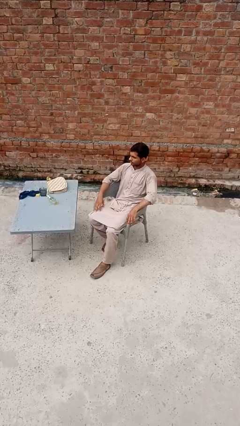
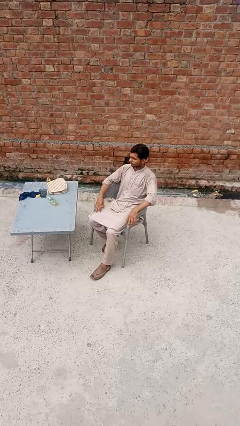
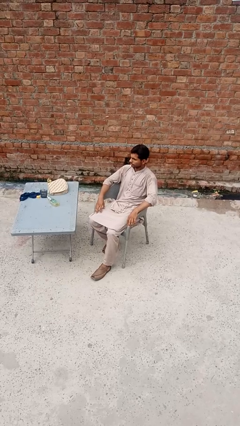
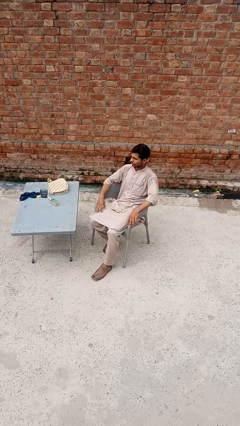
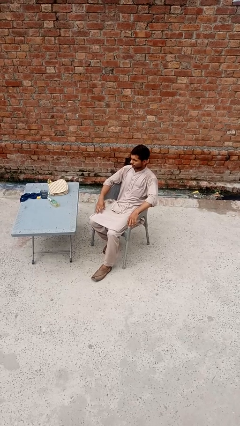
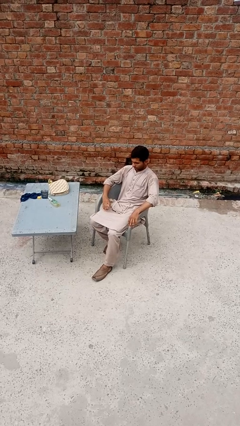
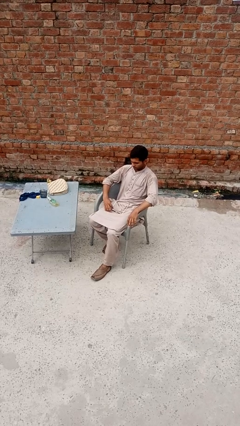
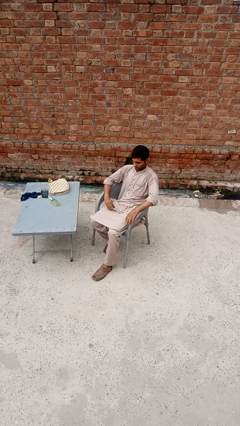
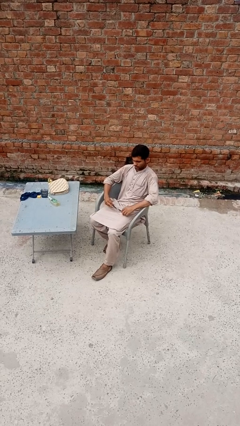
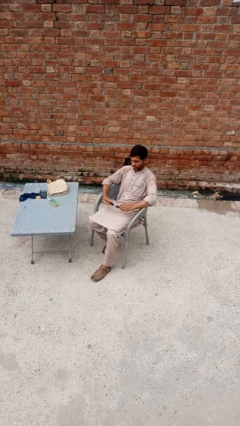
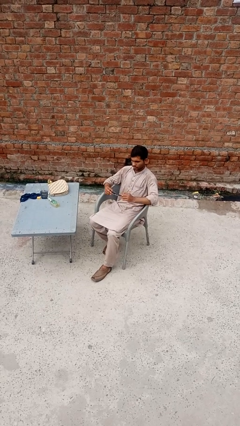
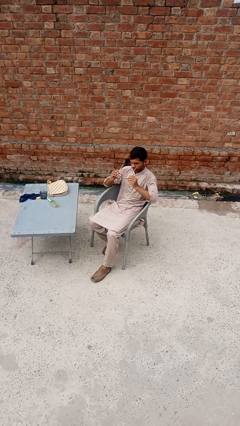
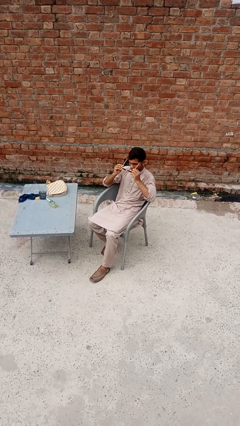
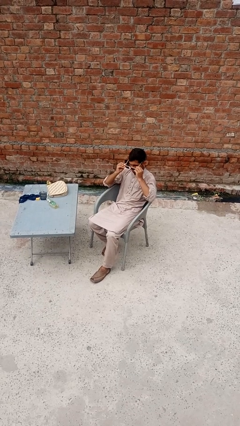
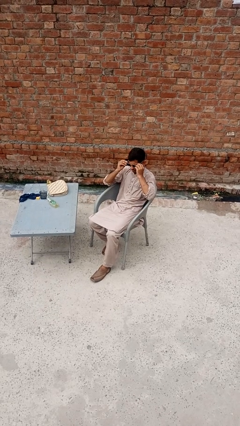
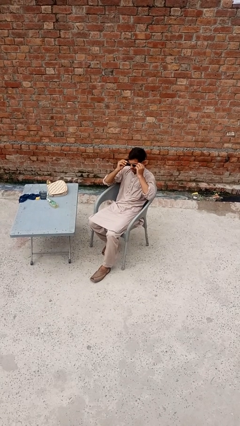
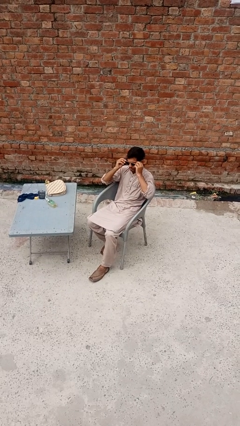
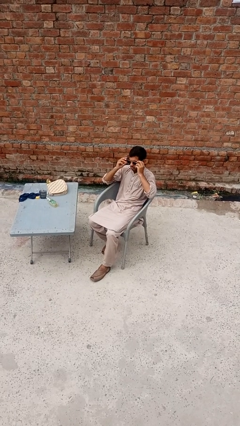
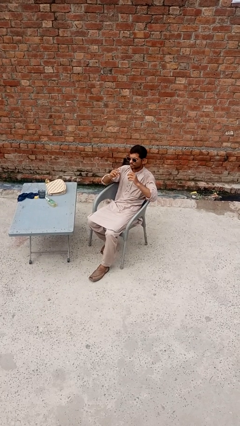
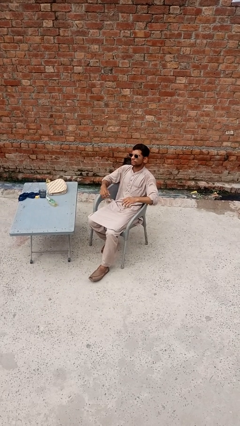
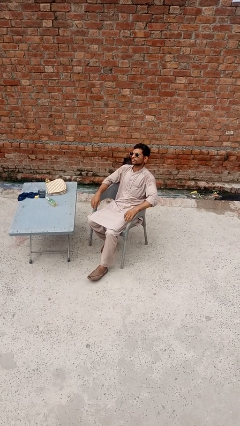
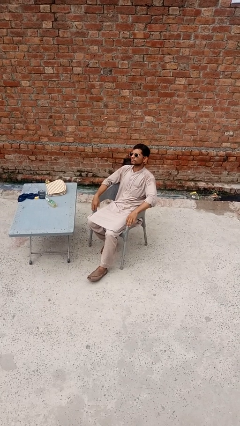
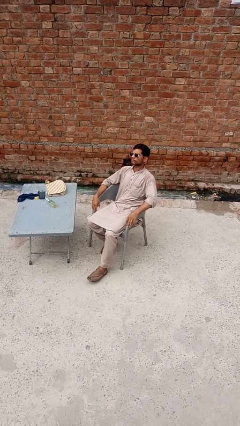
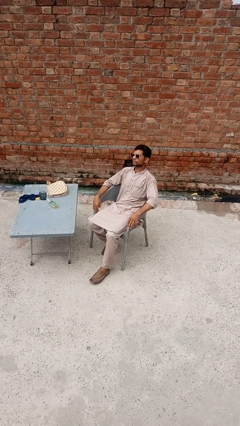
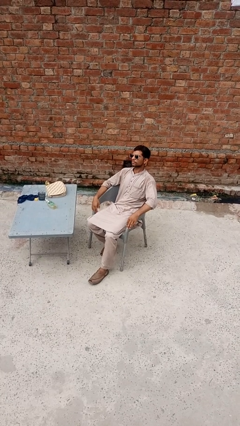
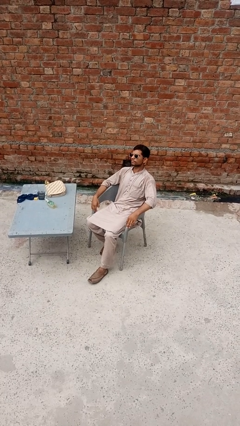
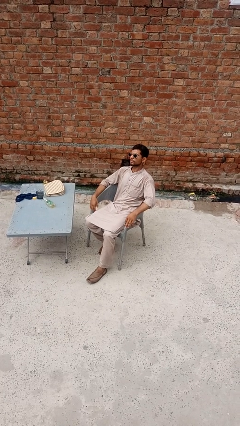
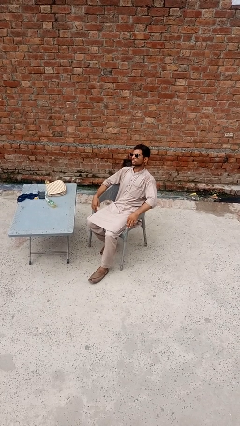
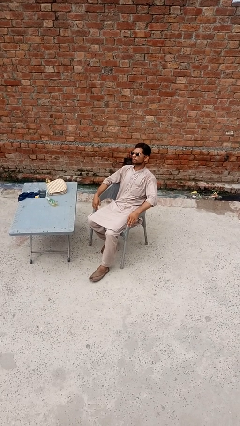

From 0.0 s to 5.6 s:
person puts on sunglasses

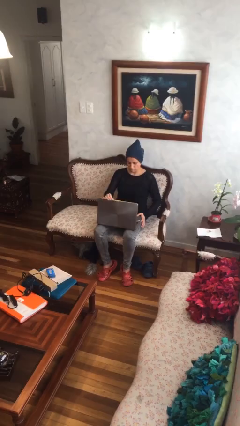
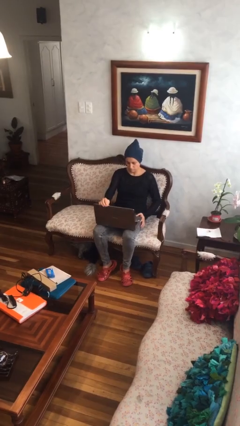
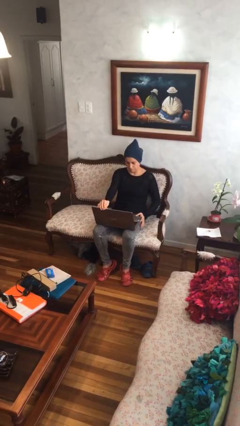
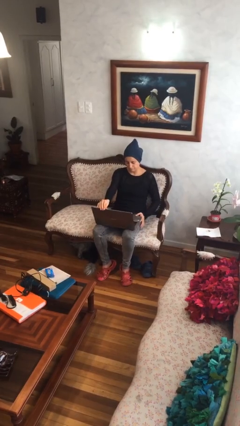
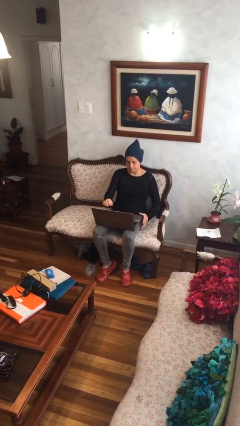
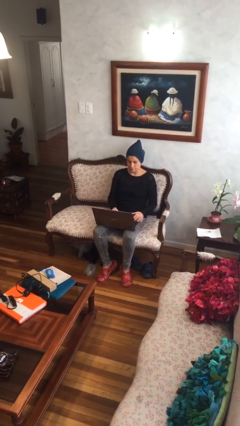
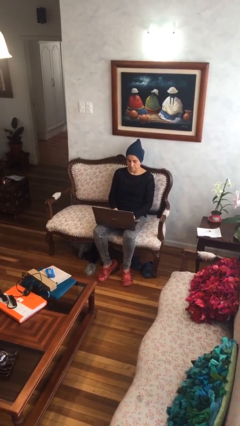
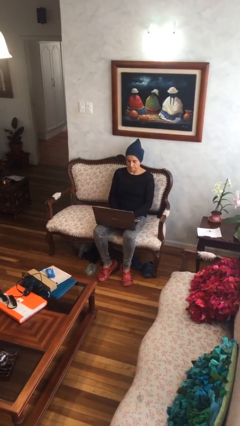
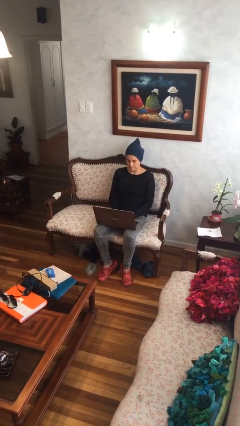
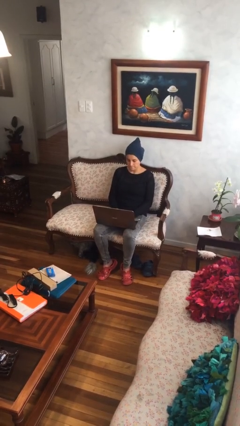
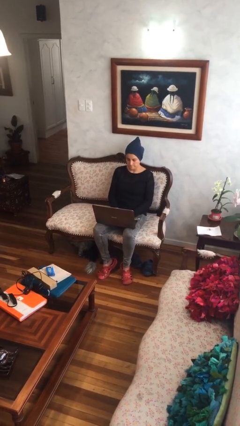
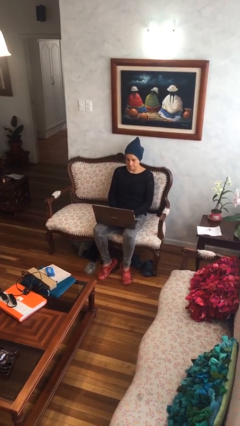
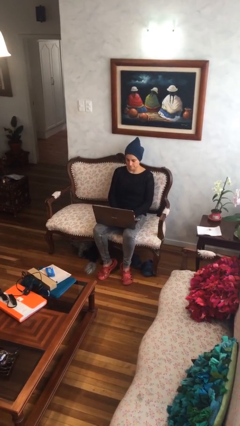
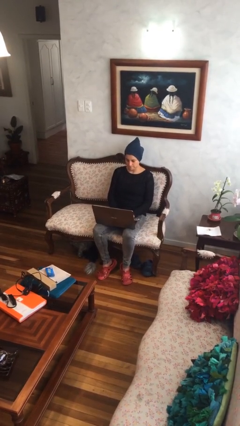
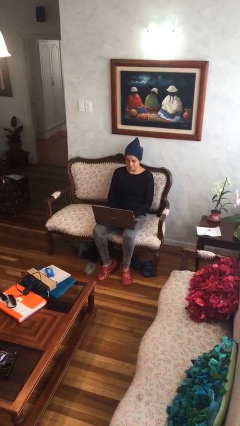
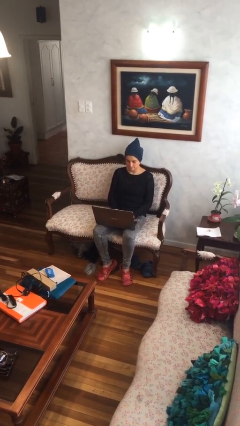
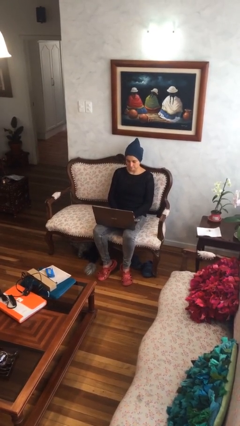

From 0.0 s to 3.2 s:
person interacts with laptop

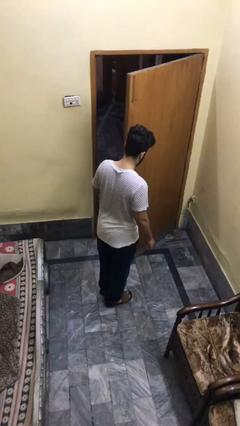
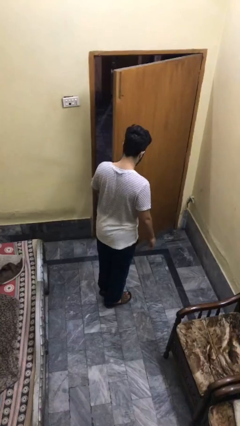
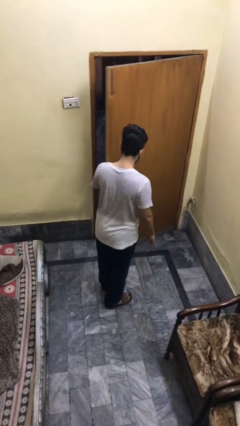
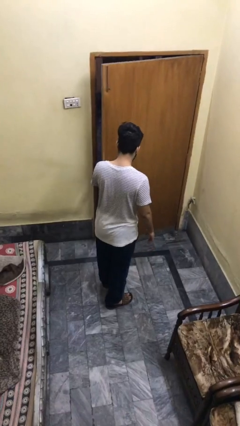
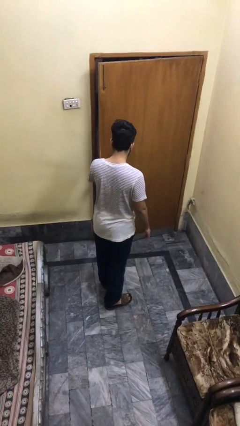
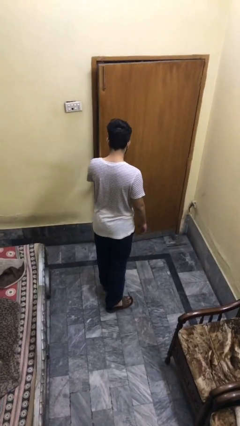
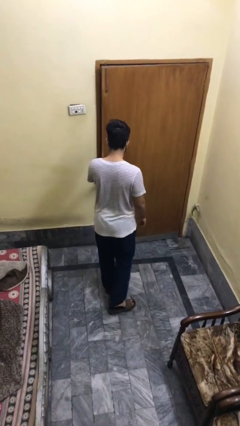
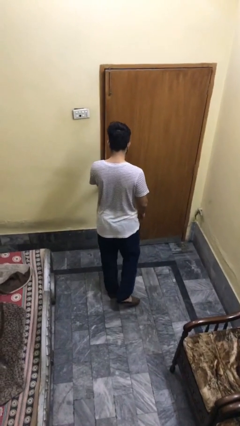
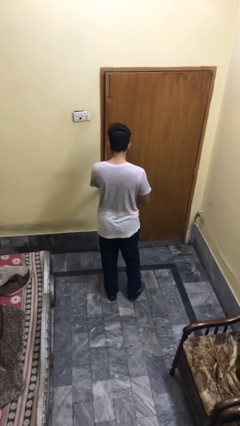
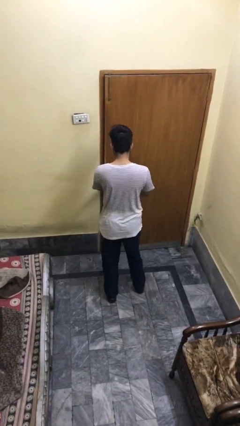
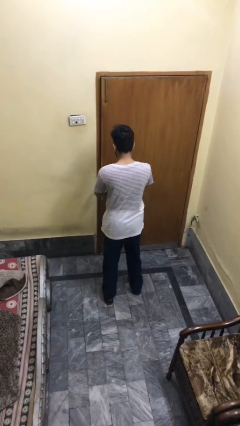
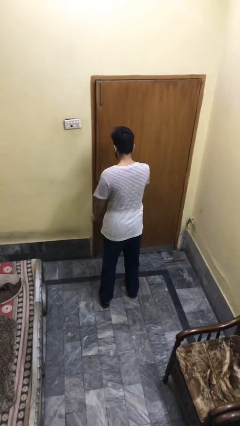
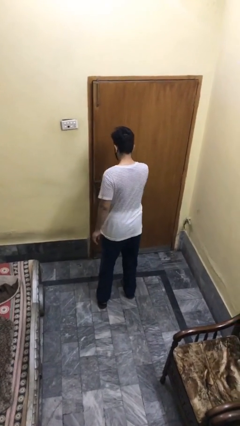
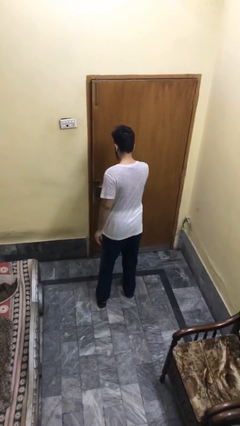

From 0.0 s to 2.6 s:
person closes facility door

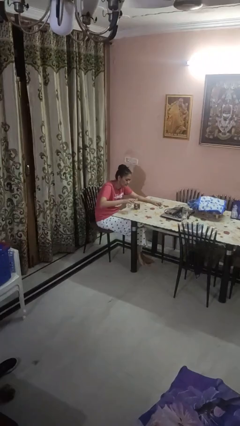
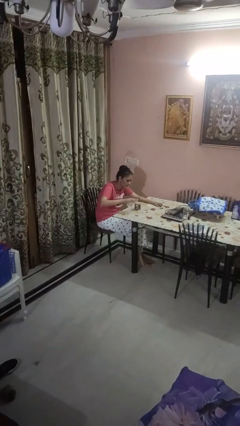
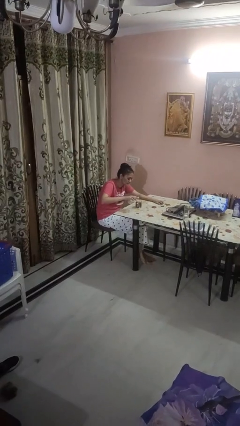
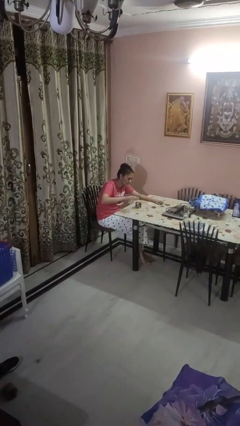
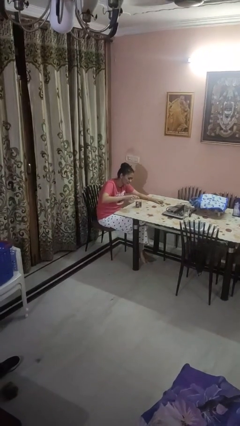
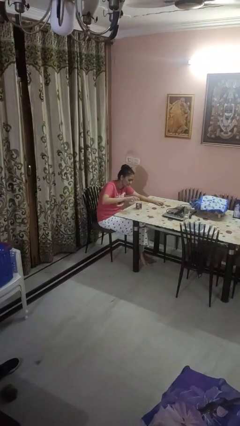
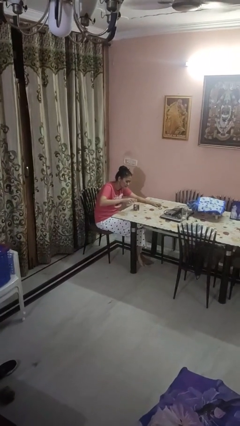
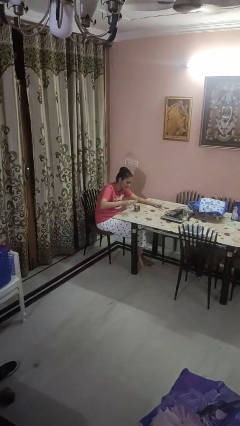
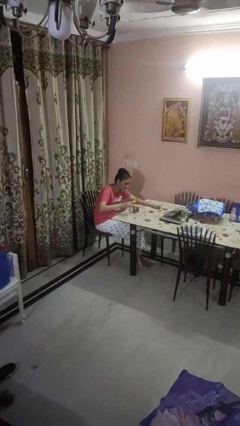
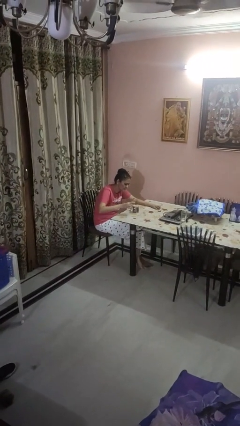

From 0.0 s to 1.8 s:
person pours liquid into cup

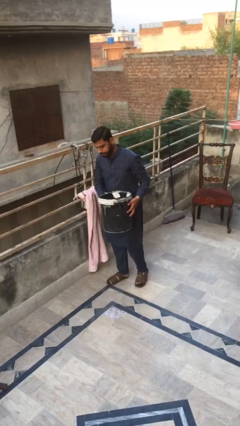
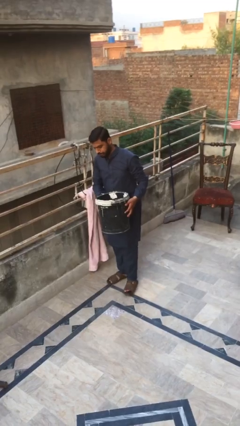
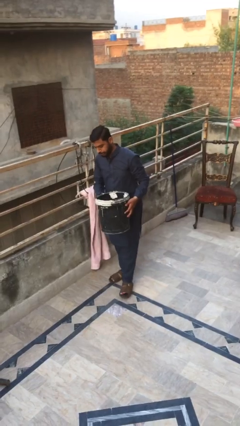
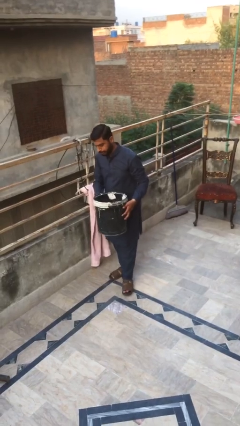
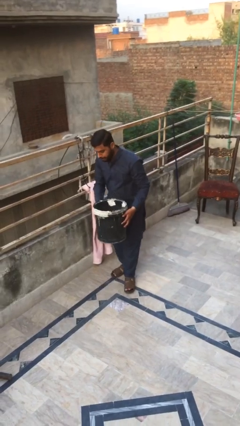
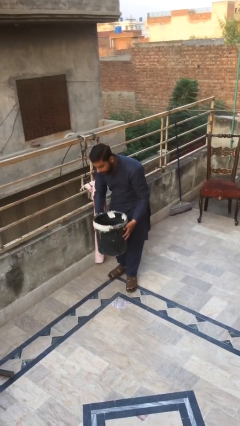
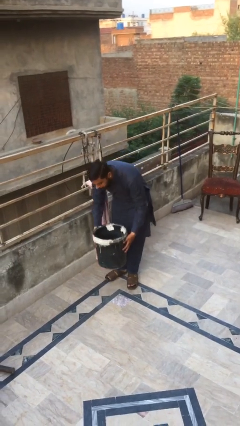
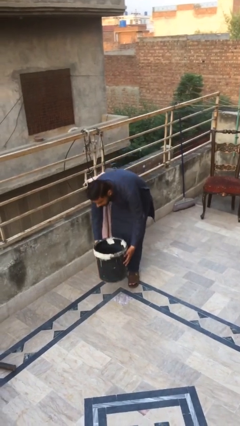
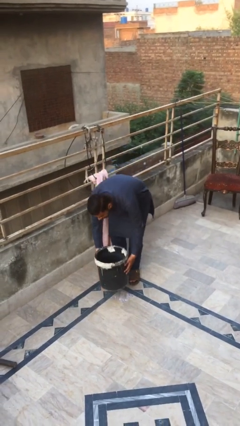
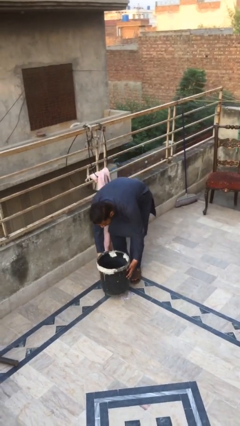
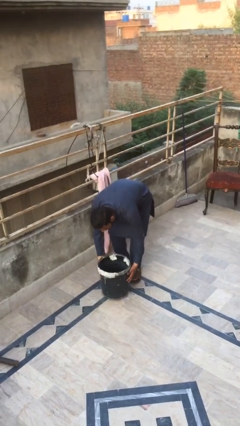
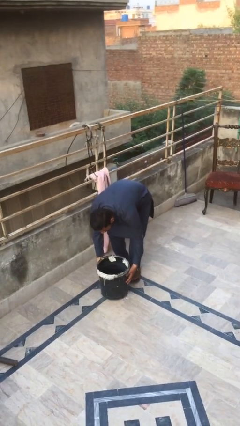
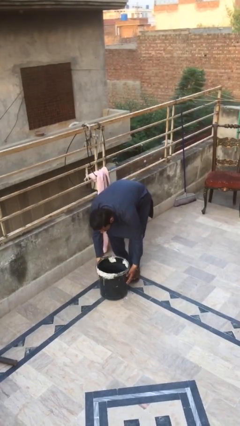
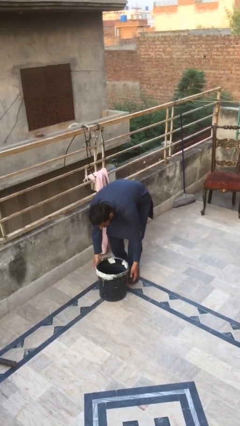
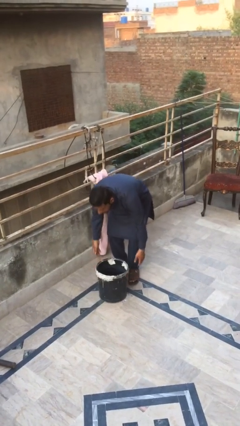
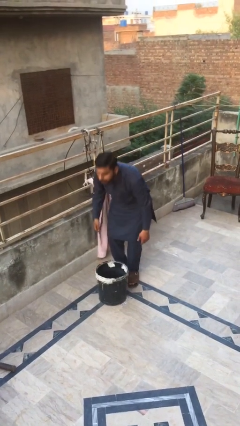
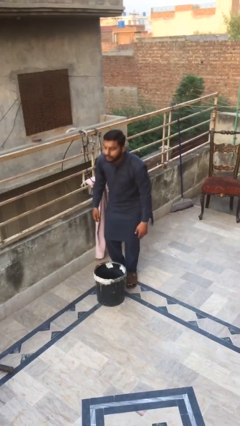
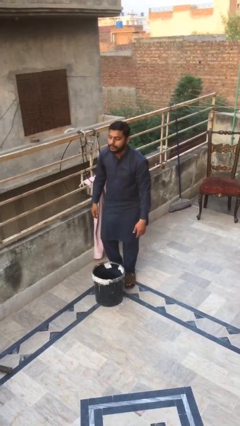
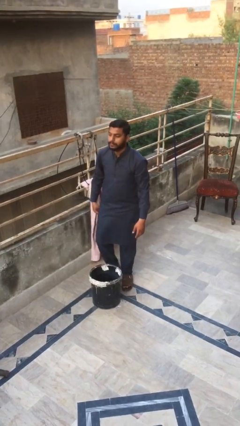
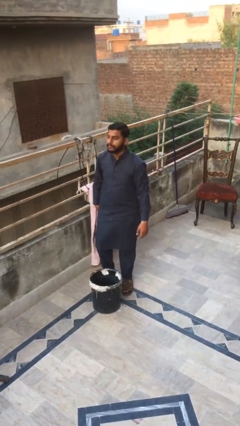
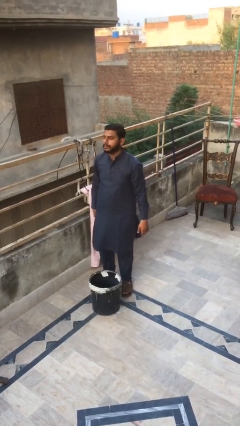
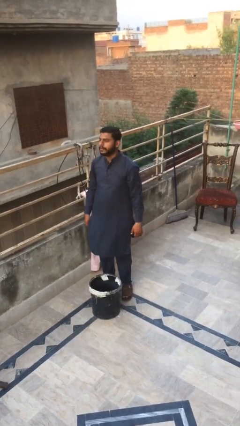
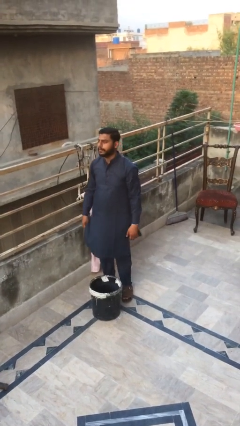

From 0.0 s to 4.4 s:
person puts down object on floor
